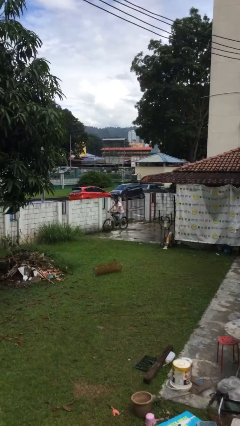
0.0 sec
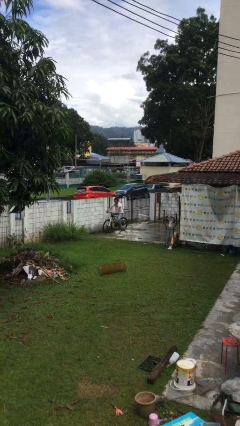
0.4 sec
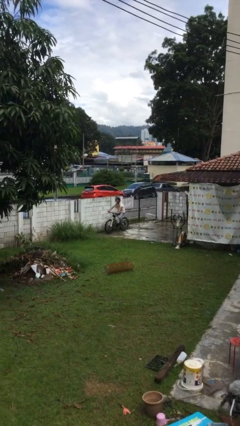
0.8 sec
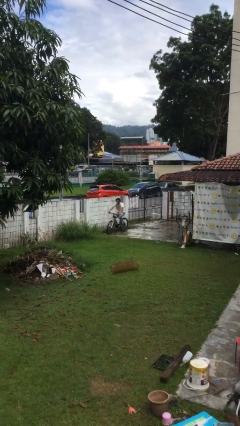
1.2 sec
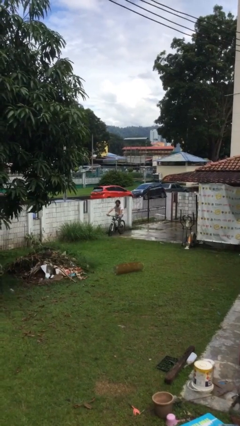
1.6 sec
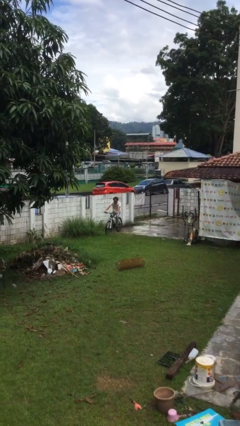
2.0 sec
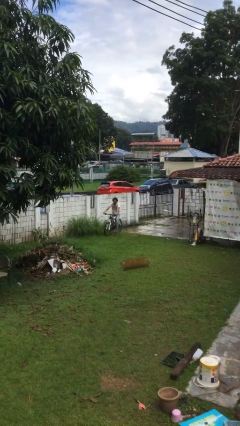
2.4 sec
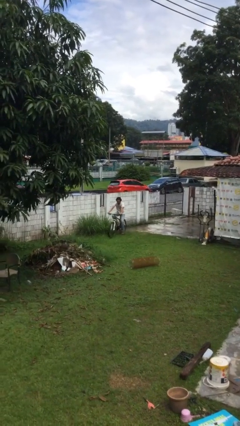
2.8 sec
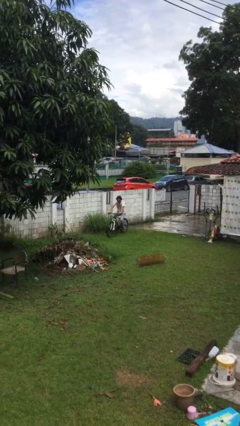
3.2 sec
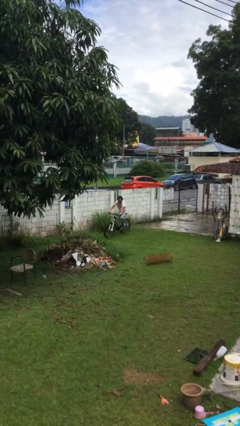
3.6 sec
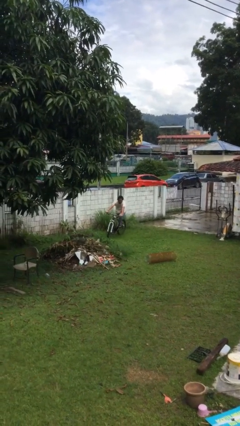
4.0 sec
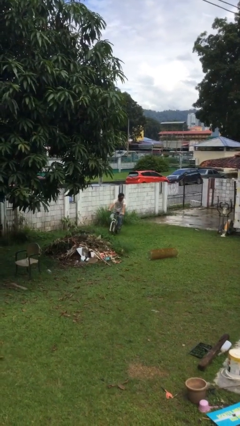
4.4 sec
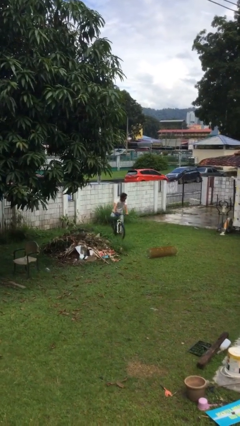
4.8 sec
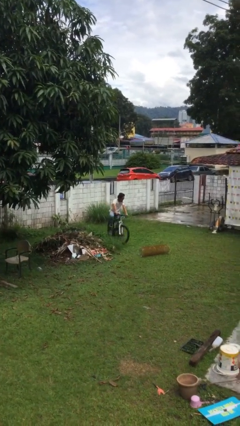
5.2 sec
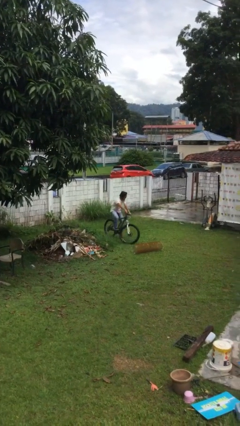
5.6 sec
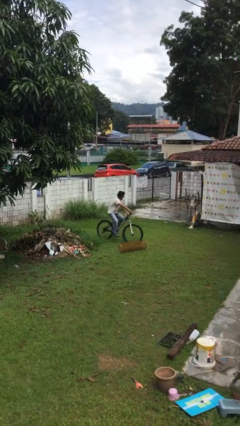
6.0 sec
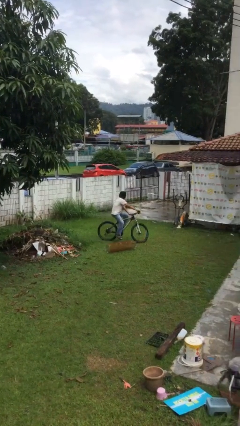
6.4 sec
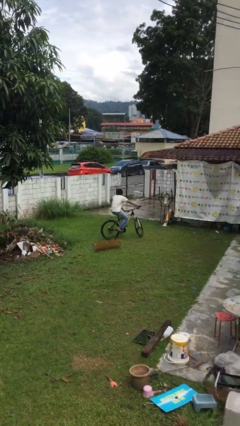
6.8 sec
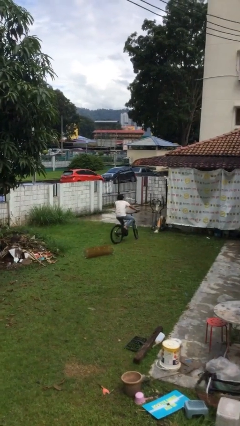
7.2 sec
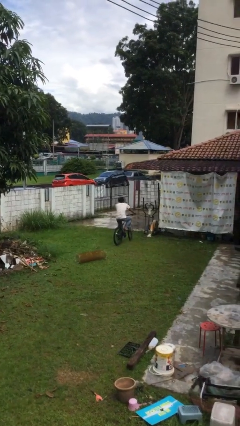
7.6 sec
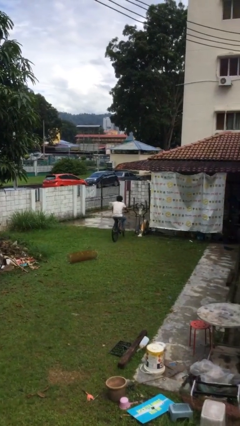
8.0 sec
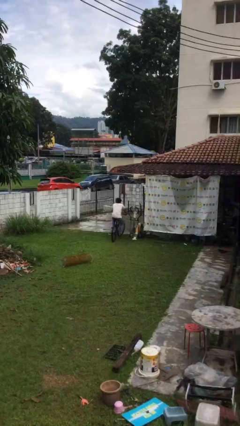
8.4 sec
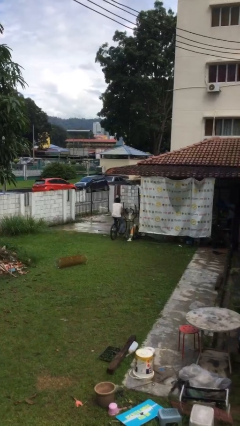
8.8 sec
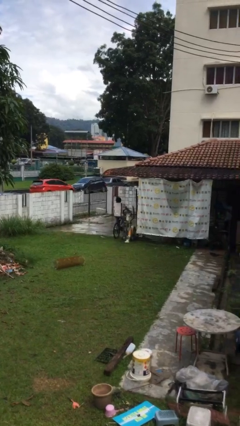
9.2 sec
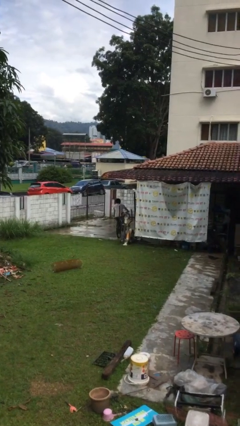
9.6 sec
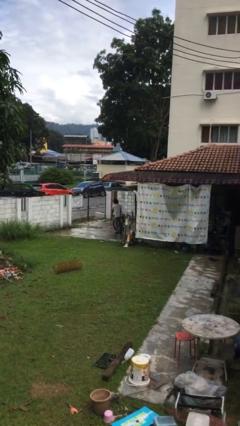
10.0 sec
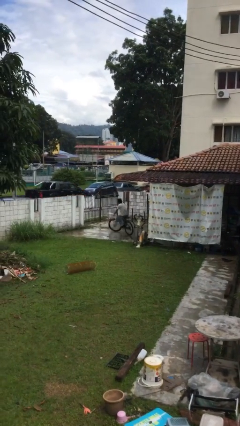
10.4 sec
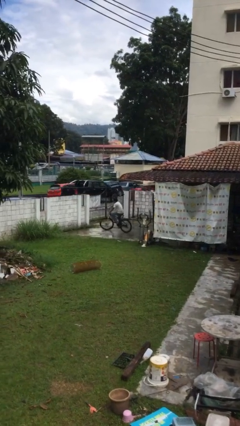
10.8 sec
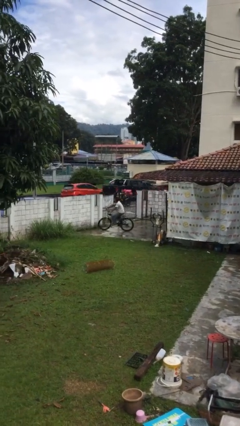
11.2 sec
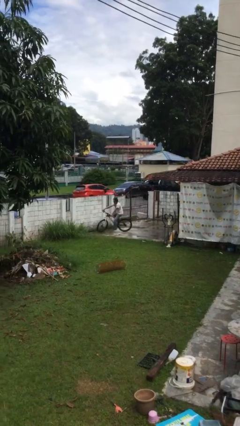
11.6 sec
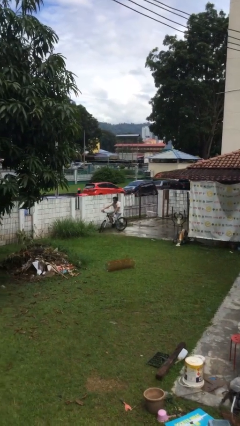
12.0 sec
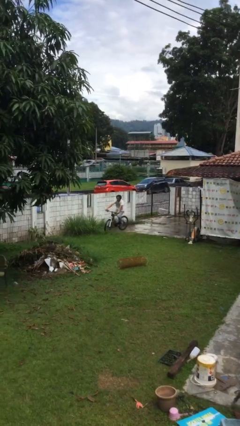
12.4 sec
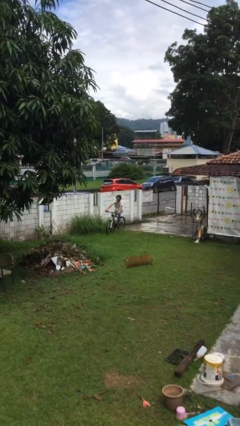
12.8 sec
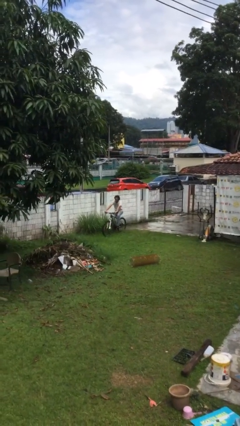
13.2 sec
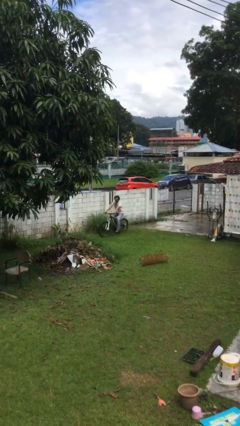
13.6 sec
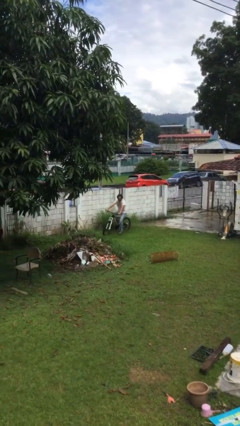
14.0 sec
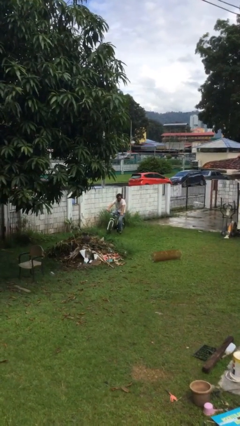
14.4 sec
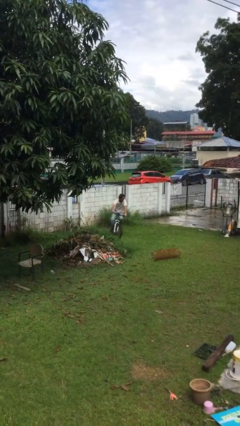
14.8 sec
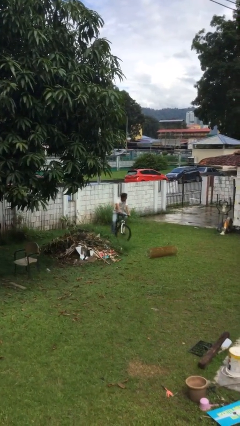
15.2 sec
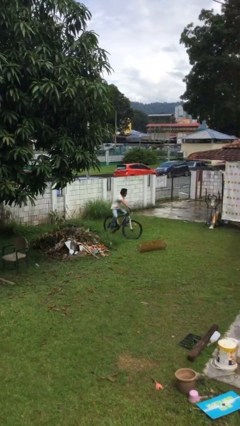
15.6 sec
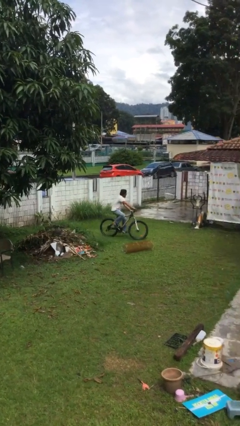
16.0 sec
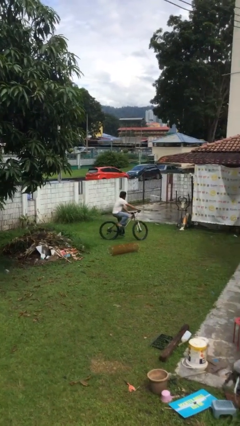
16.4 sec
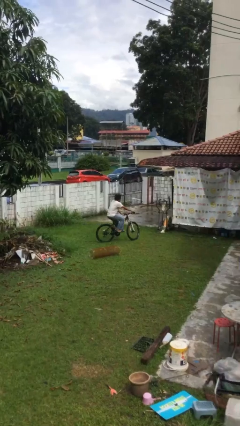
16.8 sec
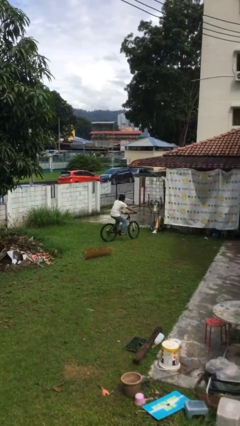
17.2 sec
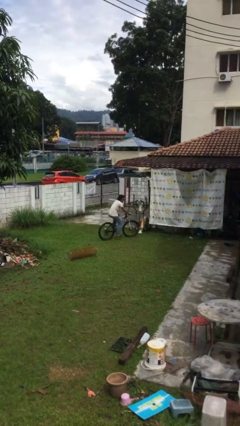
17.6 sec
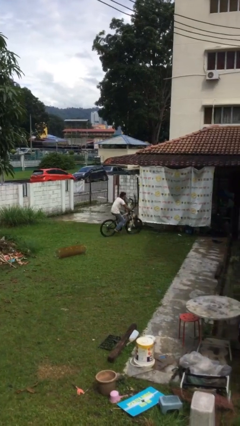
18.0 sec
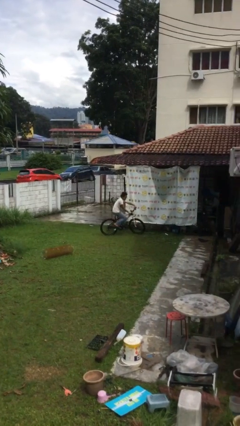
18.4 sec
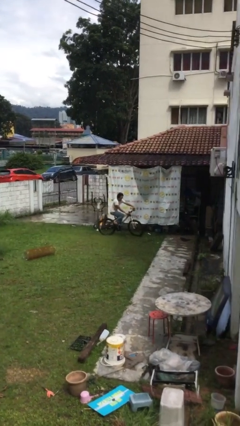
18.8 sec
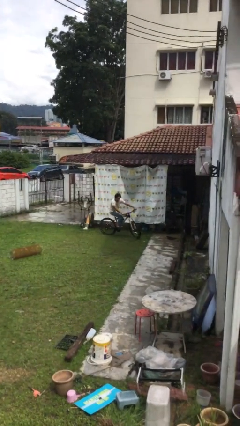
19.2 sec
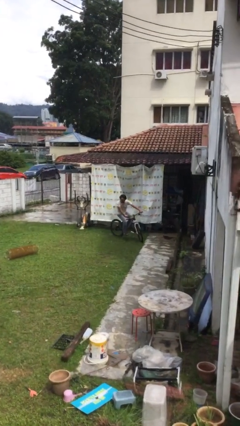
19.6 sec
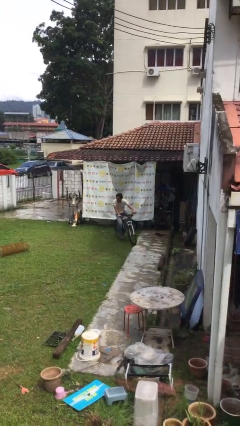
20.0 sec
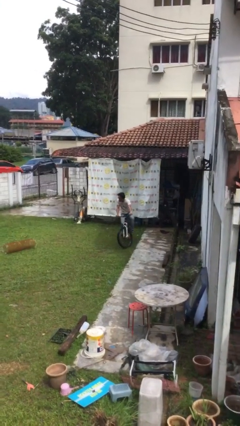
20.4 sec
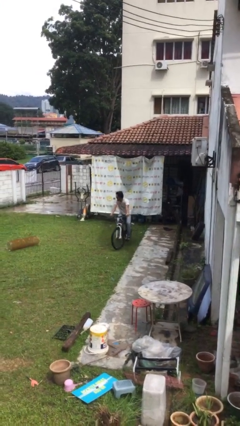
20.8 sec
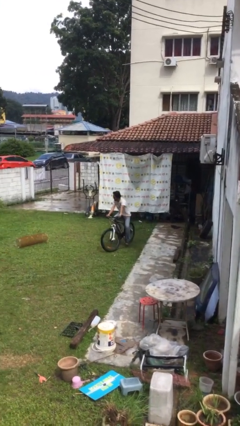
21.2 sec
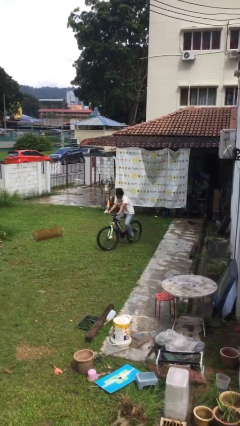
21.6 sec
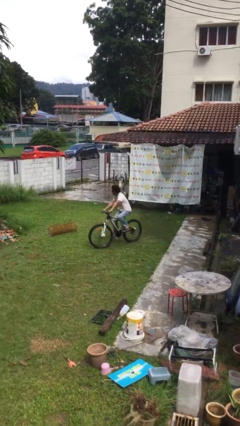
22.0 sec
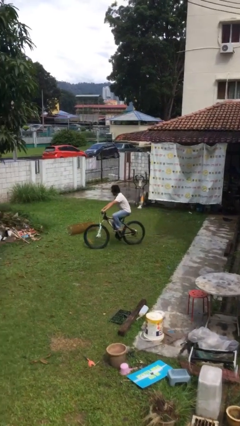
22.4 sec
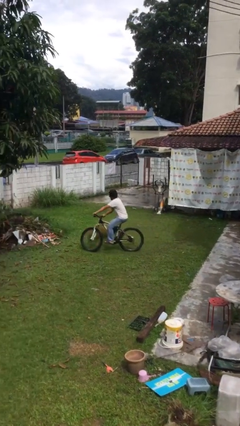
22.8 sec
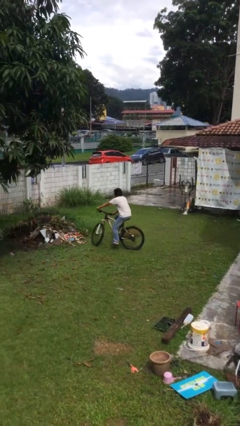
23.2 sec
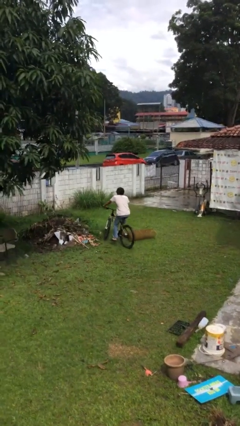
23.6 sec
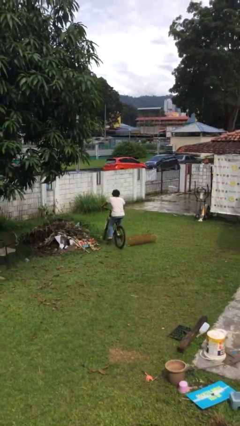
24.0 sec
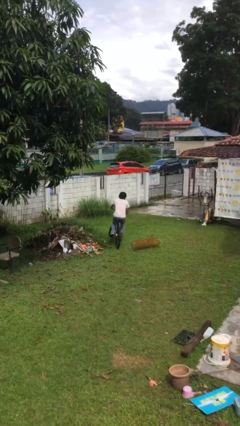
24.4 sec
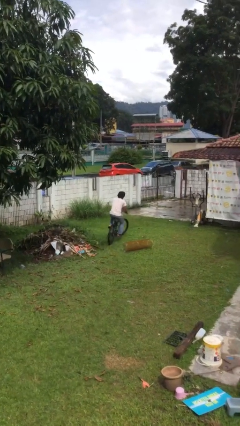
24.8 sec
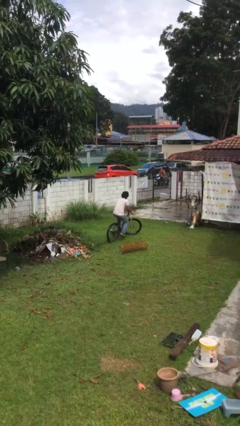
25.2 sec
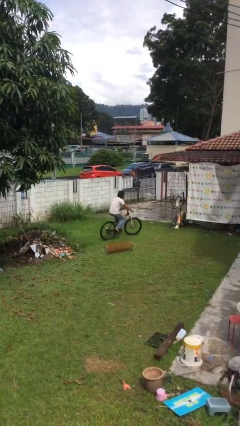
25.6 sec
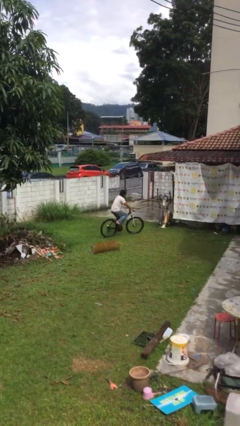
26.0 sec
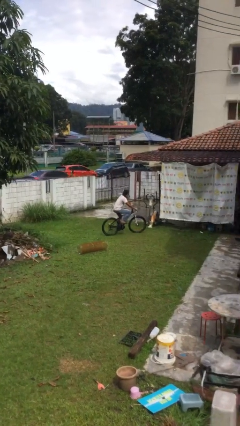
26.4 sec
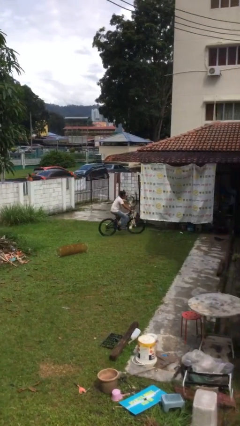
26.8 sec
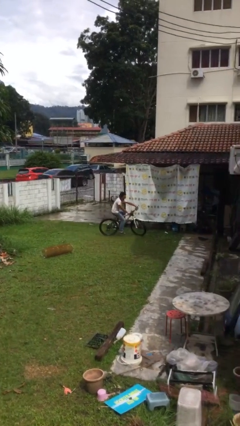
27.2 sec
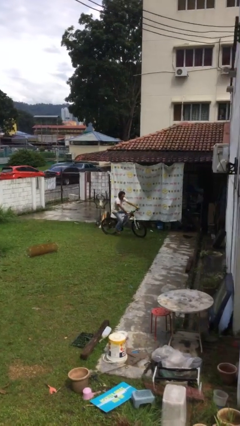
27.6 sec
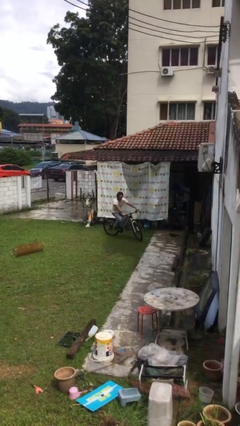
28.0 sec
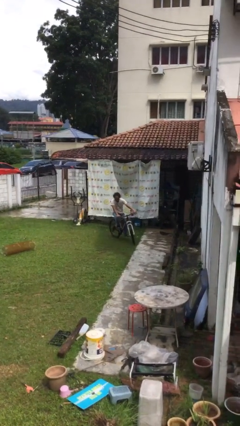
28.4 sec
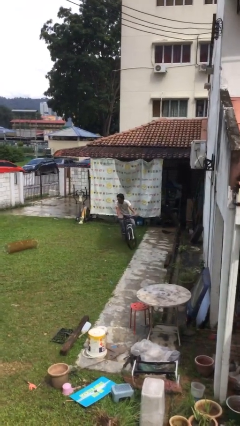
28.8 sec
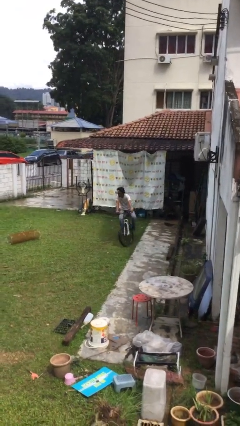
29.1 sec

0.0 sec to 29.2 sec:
person rides bicycle

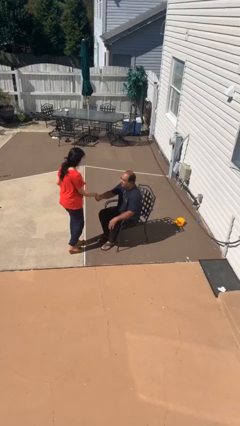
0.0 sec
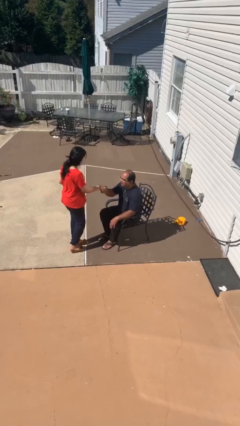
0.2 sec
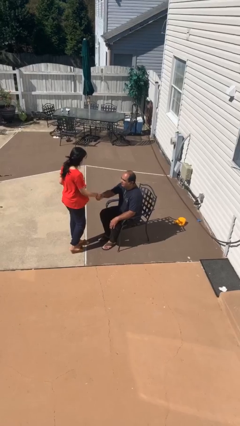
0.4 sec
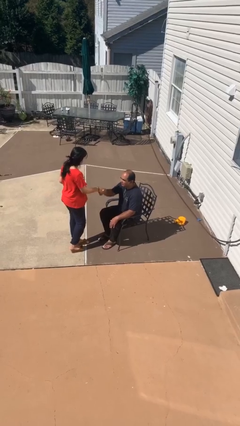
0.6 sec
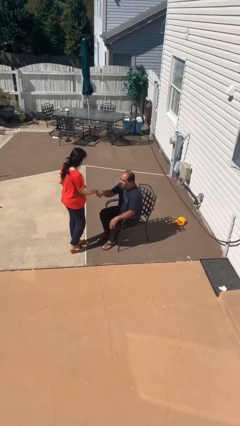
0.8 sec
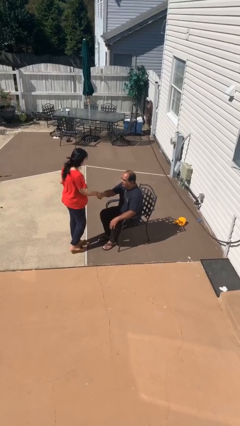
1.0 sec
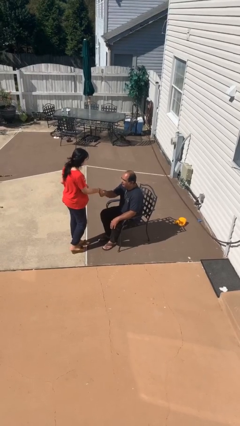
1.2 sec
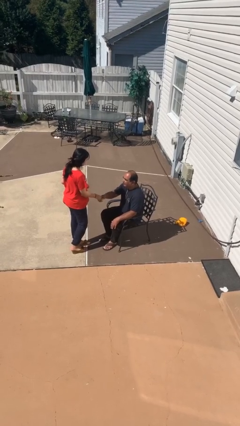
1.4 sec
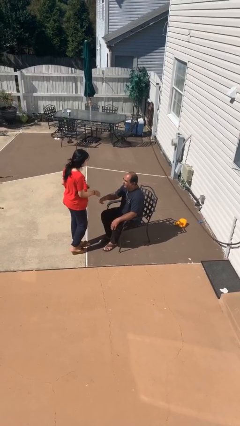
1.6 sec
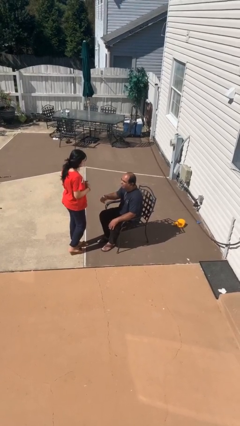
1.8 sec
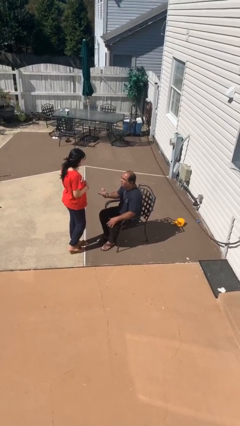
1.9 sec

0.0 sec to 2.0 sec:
person shakes hand

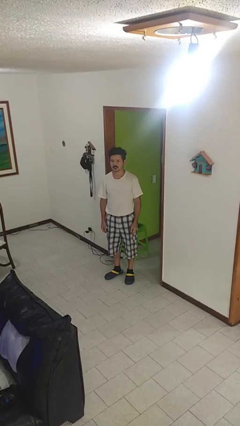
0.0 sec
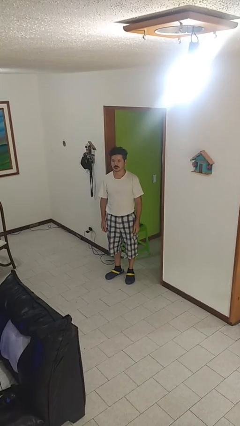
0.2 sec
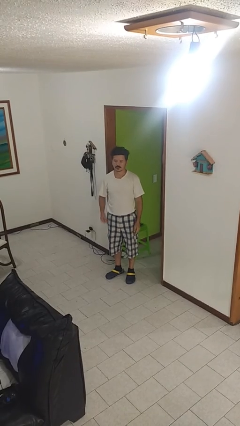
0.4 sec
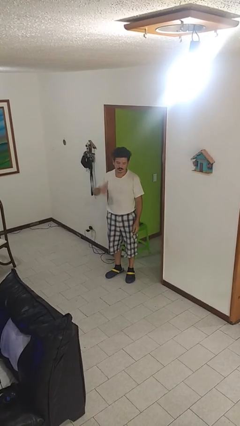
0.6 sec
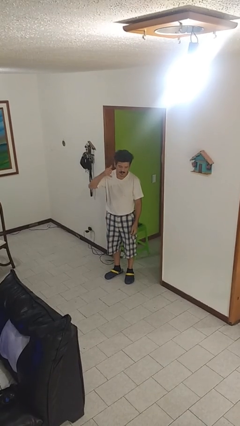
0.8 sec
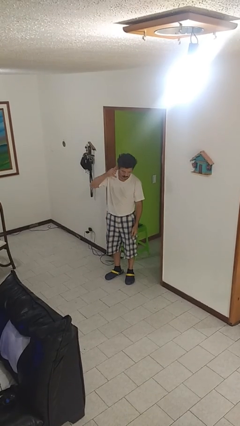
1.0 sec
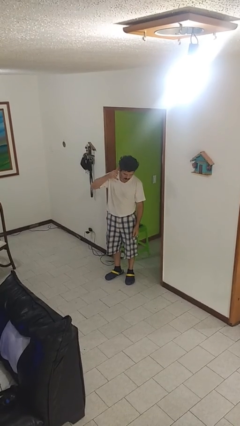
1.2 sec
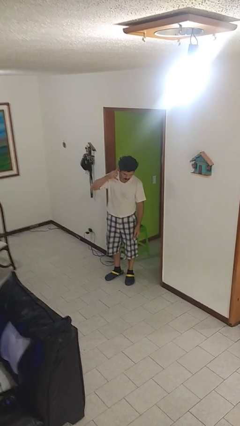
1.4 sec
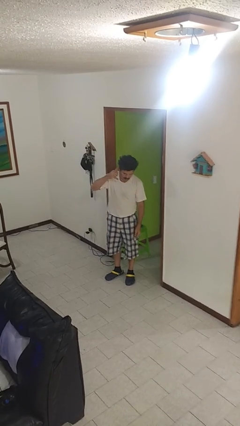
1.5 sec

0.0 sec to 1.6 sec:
person gestures call me
